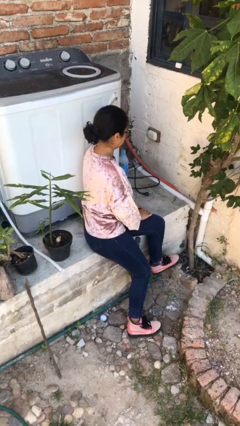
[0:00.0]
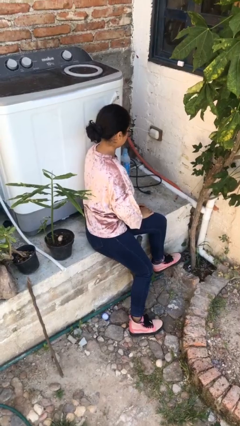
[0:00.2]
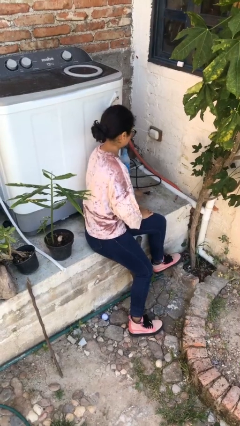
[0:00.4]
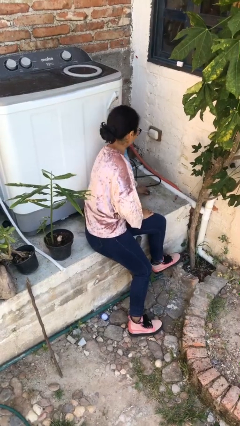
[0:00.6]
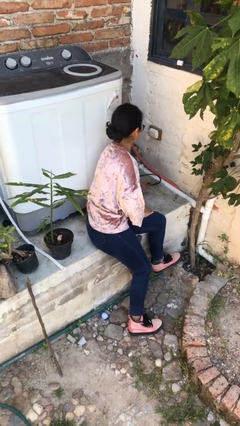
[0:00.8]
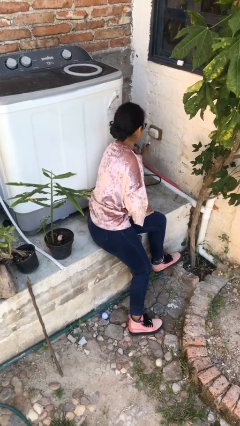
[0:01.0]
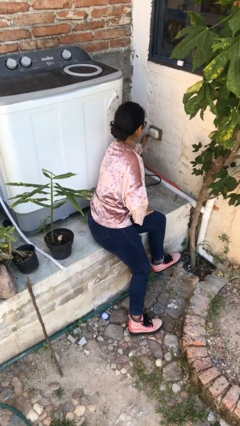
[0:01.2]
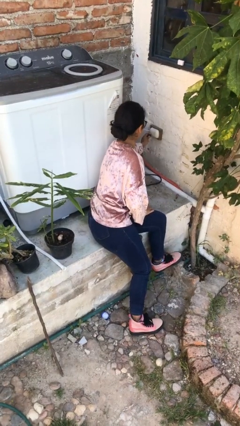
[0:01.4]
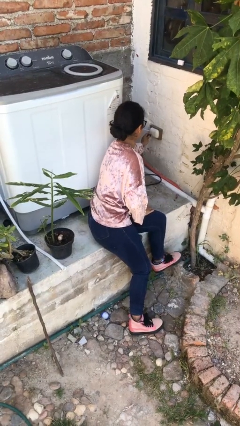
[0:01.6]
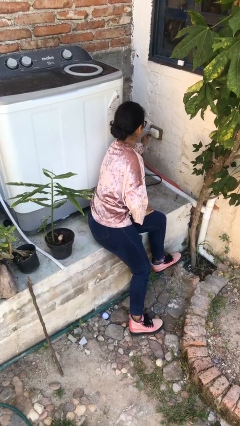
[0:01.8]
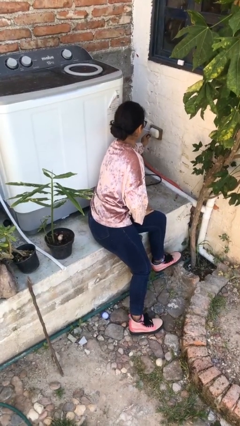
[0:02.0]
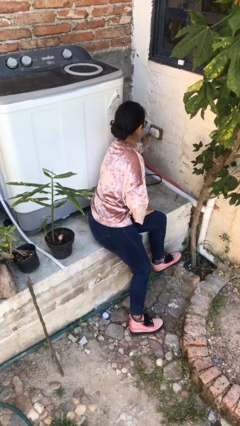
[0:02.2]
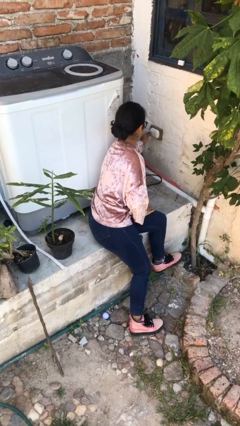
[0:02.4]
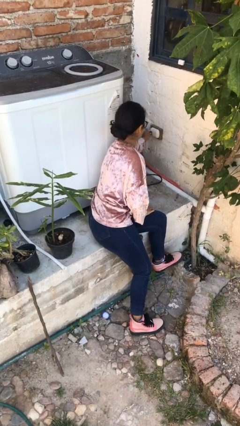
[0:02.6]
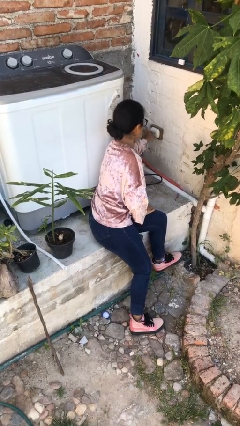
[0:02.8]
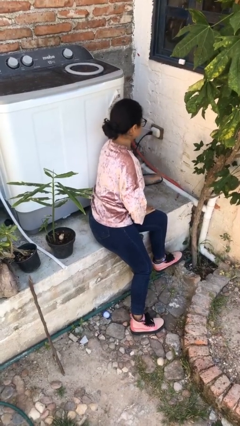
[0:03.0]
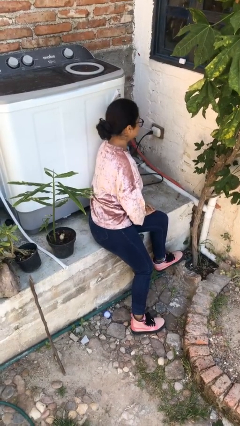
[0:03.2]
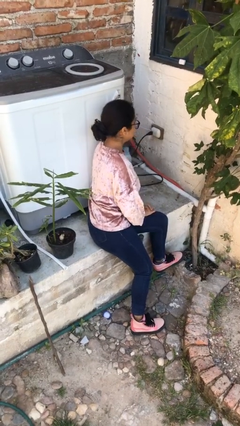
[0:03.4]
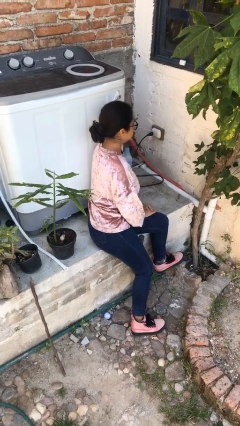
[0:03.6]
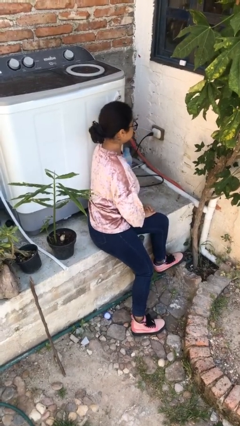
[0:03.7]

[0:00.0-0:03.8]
person plugs into electrical socket

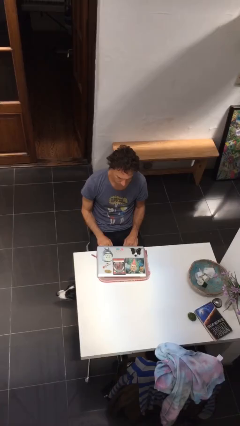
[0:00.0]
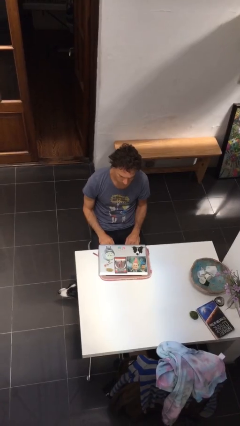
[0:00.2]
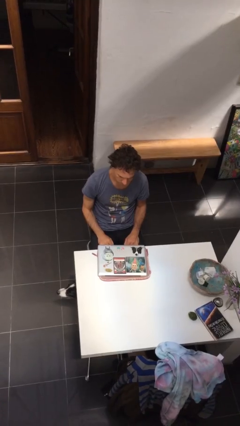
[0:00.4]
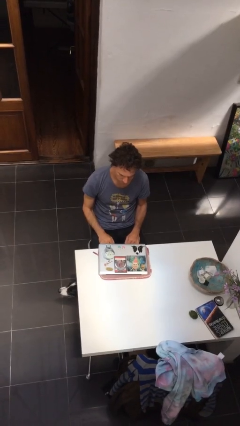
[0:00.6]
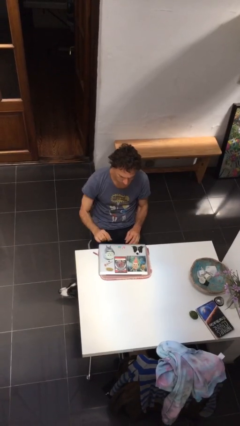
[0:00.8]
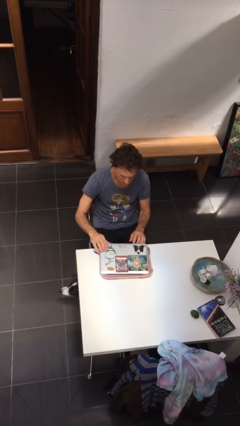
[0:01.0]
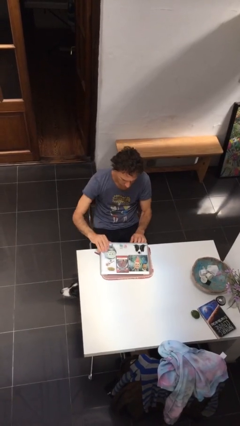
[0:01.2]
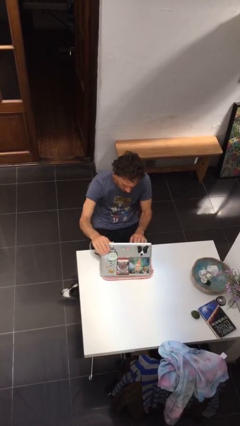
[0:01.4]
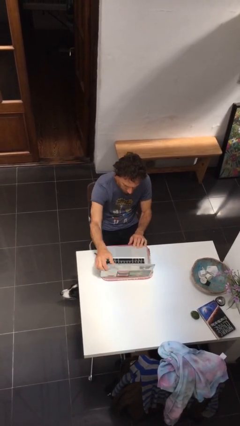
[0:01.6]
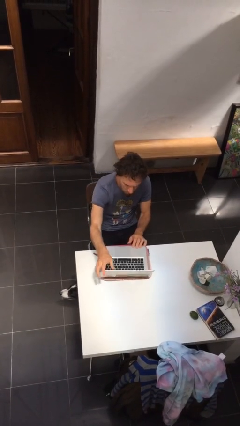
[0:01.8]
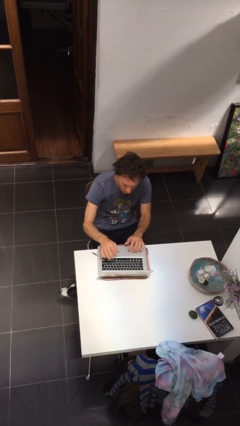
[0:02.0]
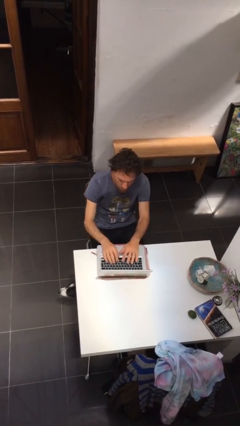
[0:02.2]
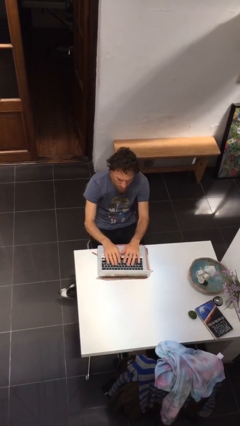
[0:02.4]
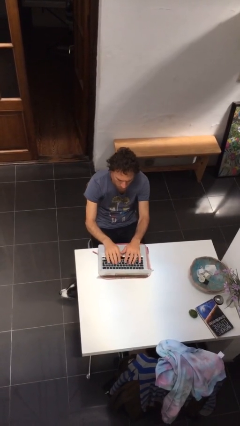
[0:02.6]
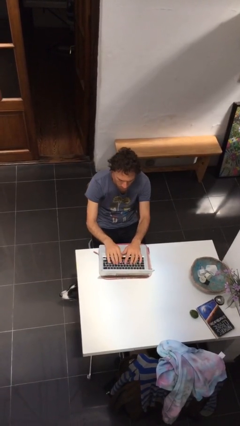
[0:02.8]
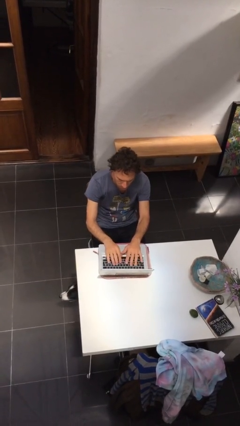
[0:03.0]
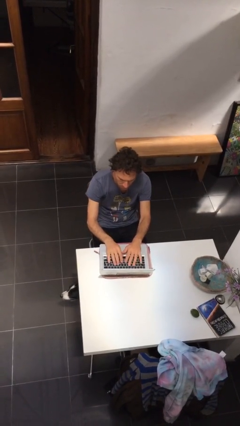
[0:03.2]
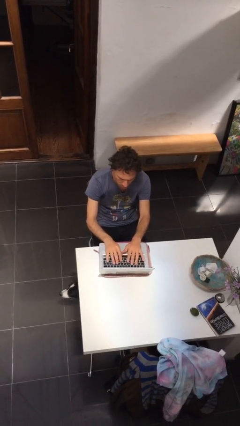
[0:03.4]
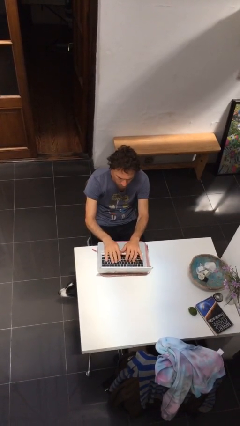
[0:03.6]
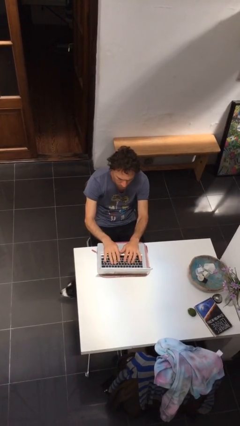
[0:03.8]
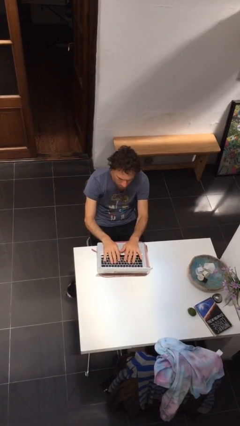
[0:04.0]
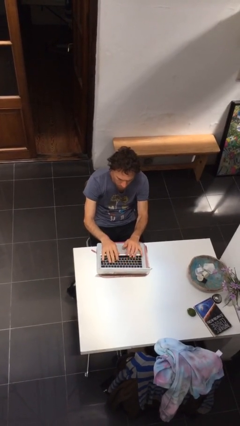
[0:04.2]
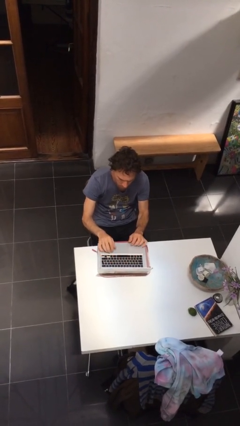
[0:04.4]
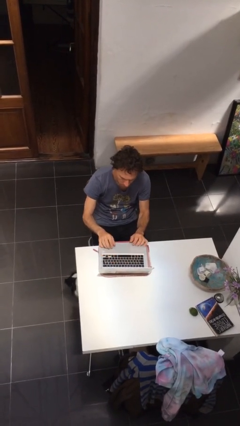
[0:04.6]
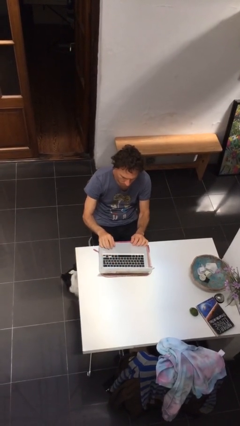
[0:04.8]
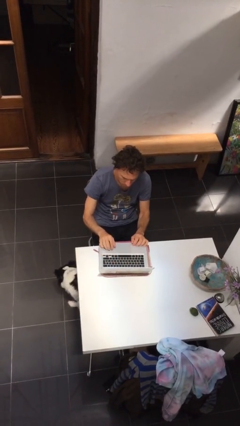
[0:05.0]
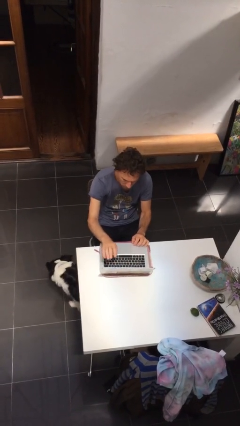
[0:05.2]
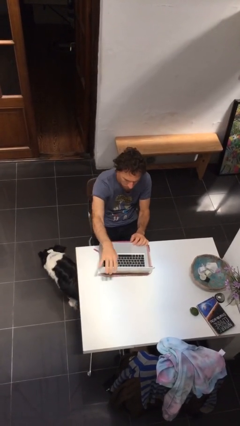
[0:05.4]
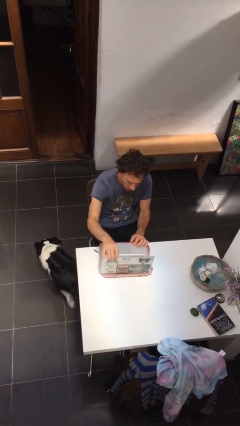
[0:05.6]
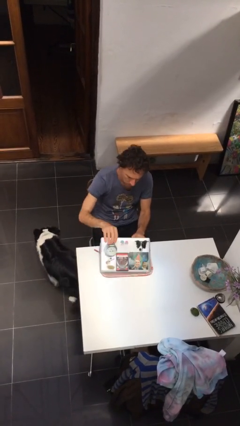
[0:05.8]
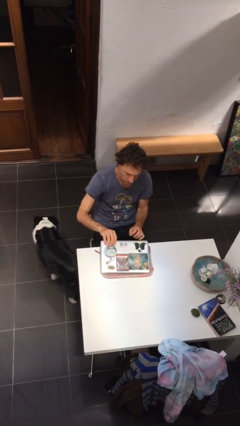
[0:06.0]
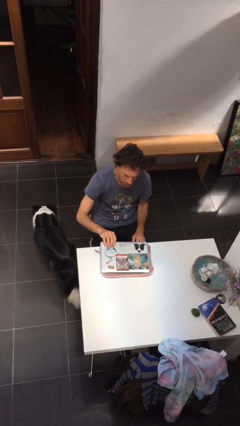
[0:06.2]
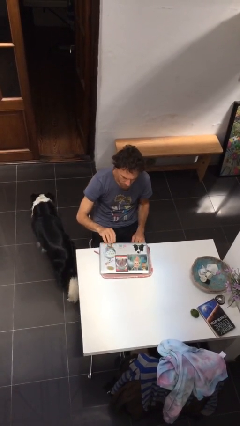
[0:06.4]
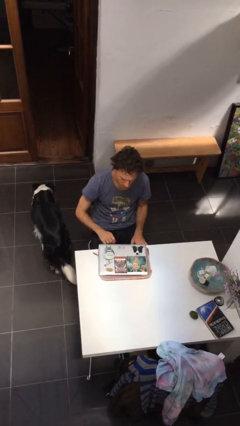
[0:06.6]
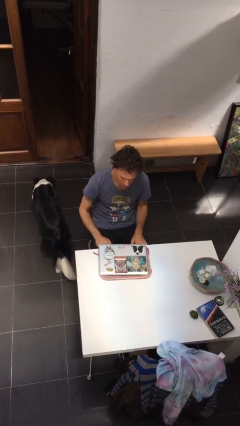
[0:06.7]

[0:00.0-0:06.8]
person interacts with laptop

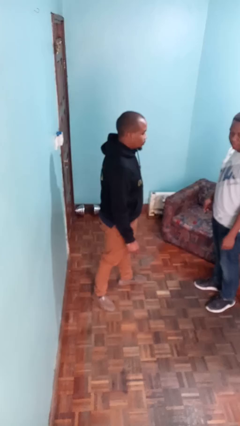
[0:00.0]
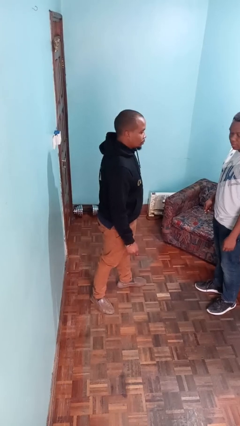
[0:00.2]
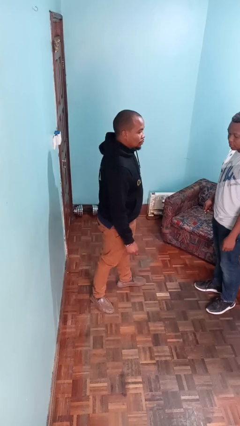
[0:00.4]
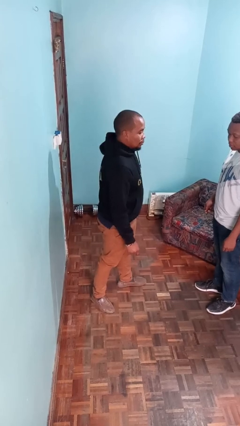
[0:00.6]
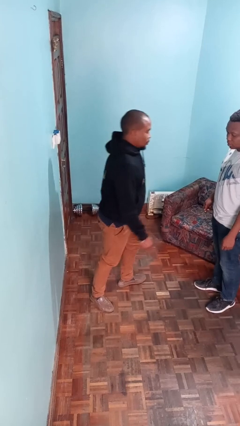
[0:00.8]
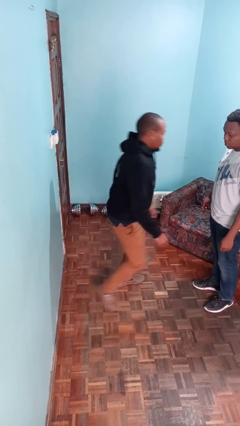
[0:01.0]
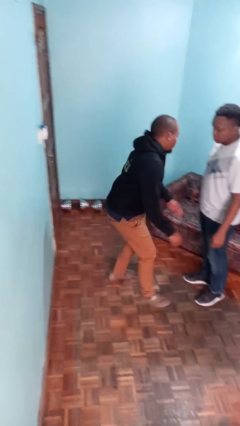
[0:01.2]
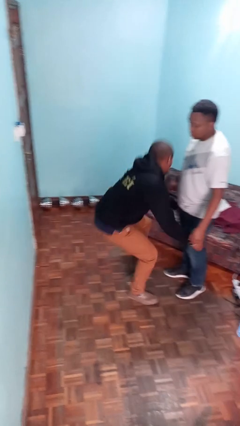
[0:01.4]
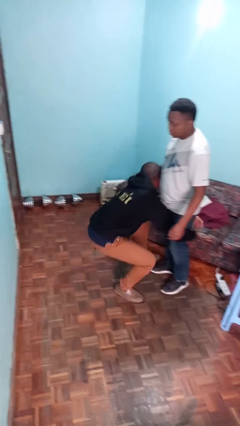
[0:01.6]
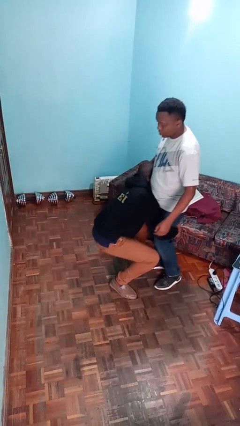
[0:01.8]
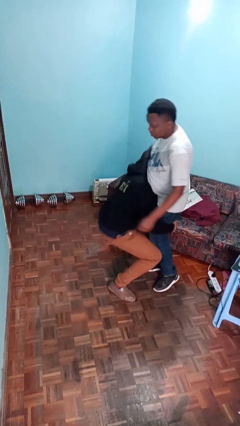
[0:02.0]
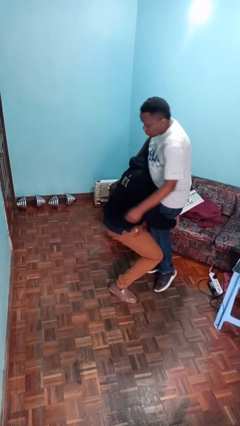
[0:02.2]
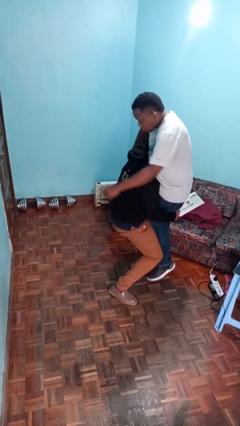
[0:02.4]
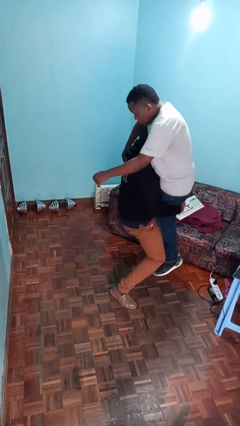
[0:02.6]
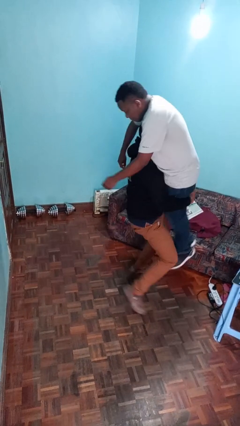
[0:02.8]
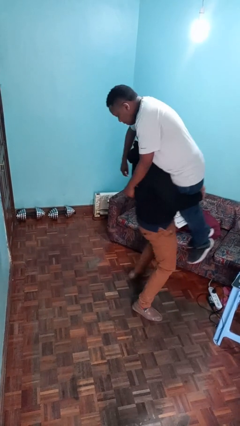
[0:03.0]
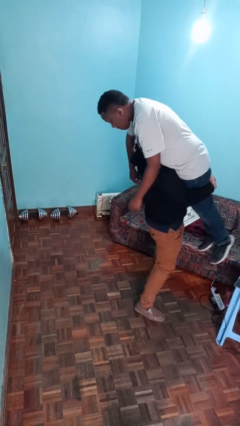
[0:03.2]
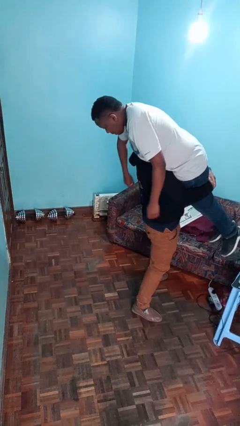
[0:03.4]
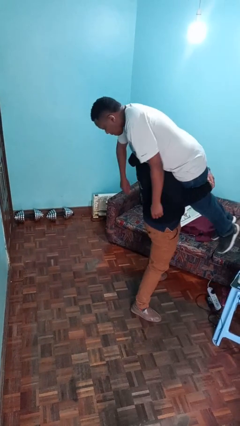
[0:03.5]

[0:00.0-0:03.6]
person carries person over shoulder

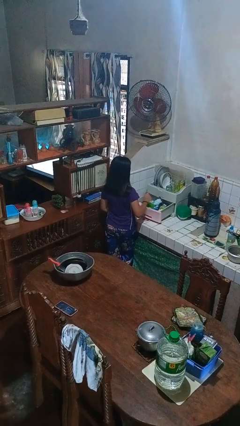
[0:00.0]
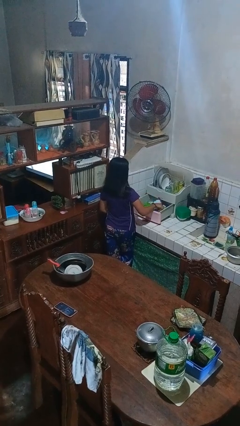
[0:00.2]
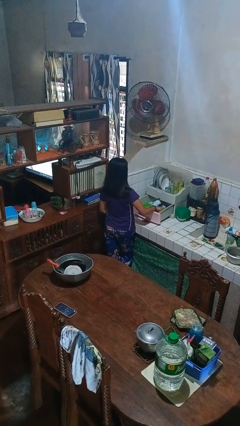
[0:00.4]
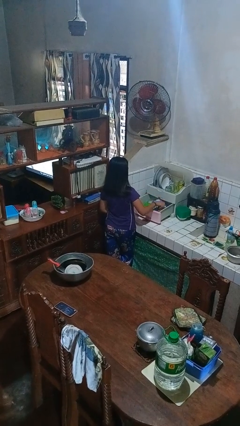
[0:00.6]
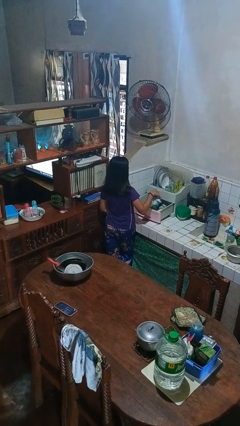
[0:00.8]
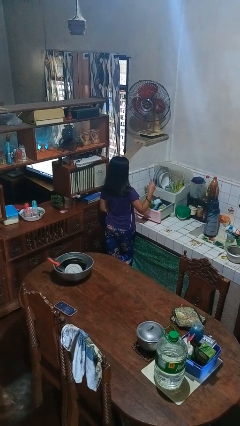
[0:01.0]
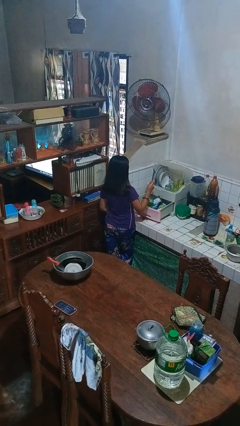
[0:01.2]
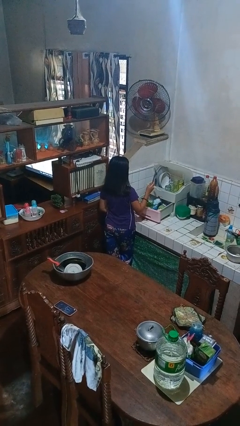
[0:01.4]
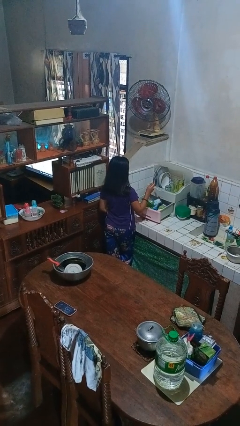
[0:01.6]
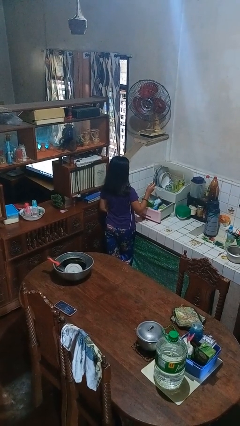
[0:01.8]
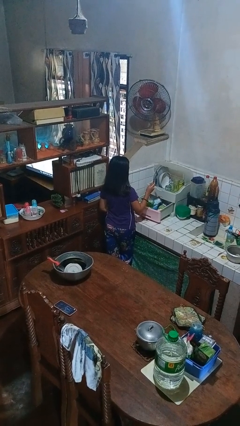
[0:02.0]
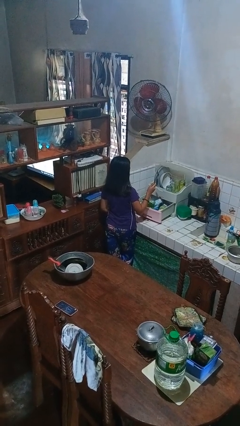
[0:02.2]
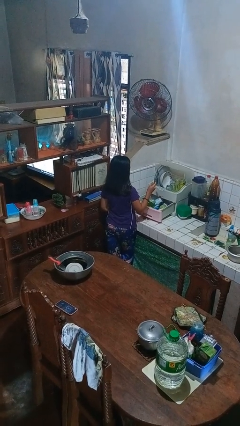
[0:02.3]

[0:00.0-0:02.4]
person takes object from kitchen drawer

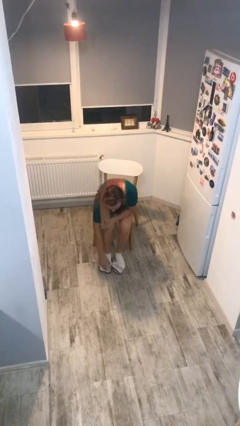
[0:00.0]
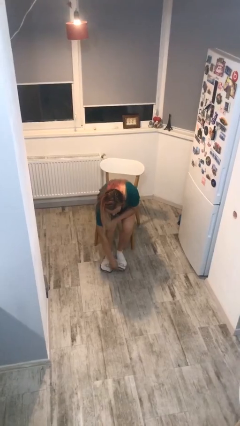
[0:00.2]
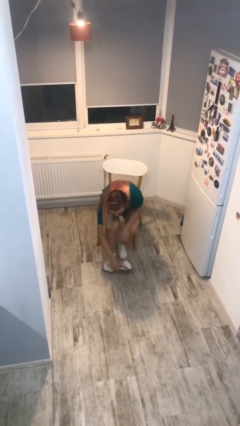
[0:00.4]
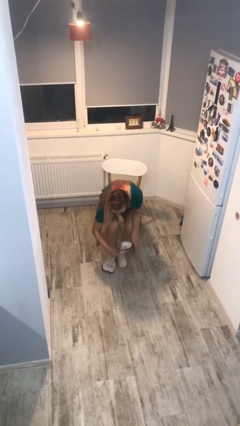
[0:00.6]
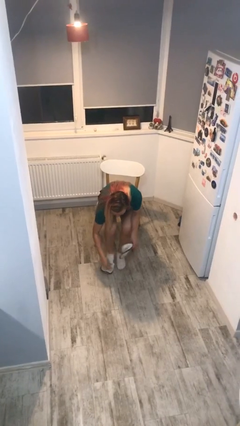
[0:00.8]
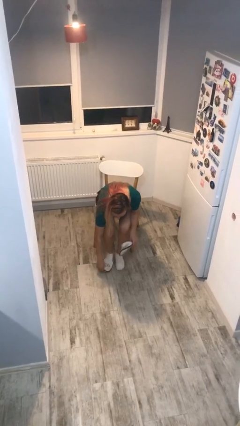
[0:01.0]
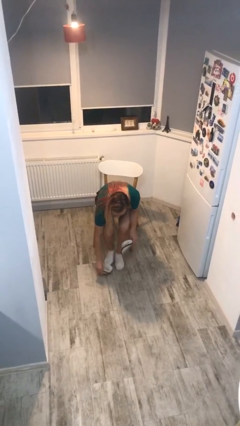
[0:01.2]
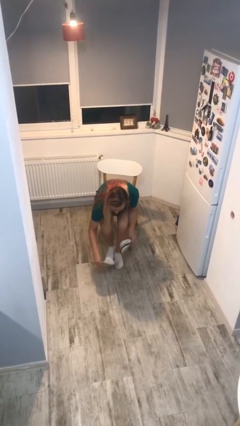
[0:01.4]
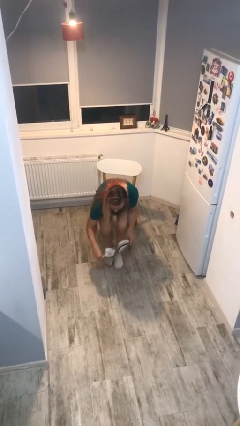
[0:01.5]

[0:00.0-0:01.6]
person takes off shoes
